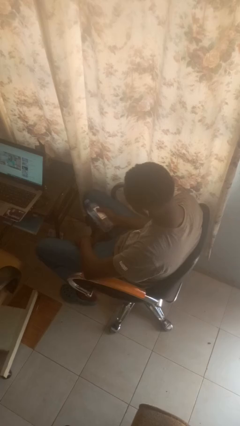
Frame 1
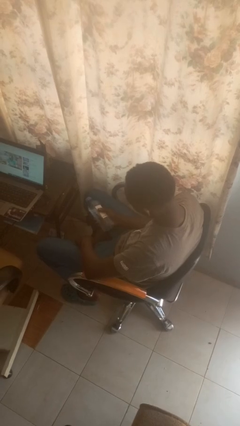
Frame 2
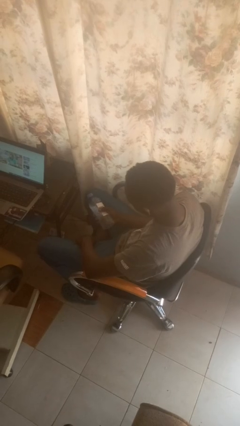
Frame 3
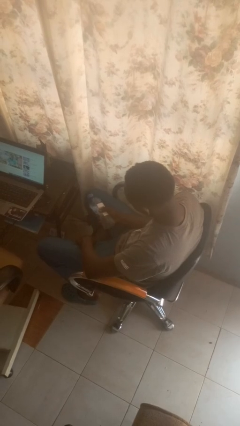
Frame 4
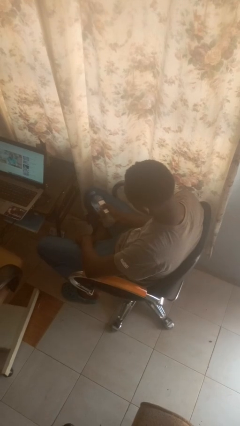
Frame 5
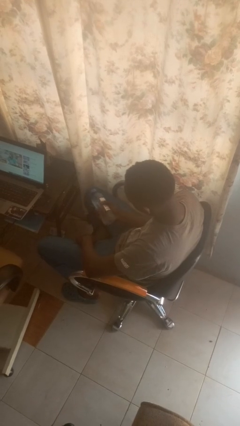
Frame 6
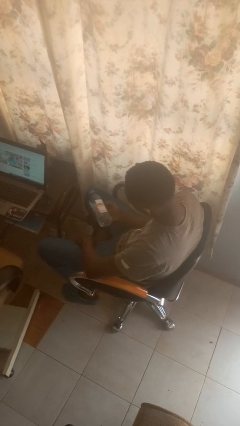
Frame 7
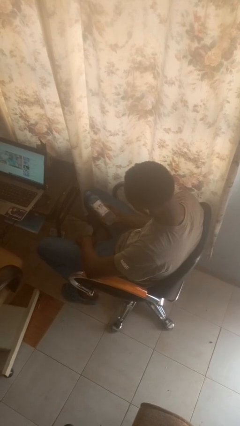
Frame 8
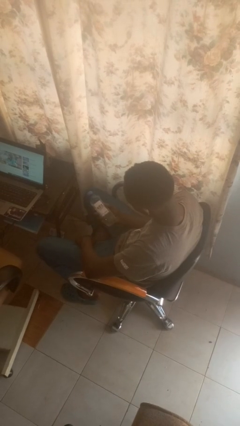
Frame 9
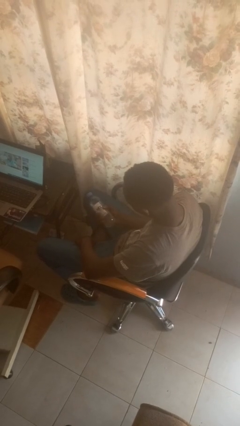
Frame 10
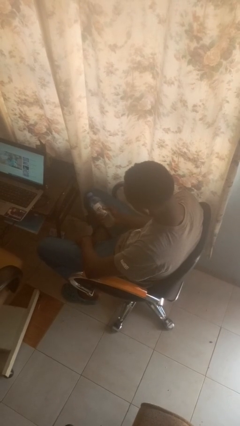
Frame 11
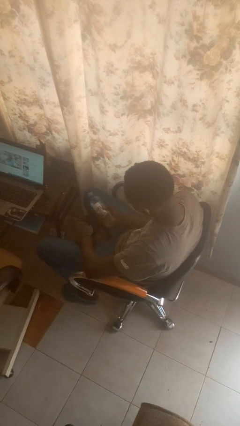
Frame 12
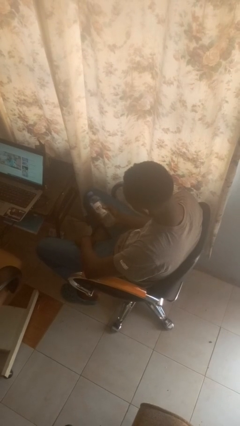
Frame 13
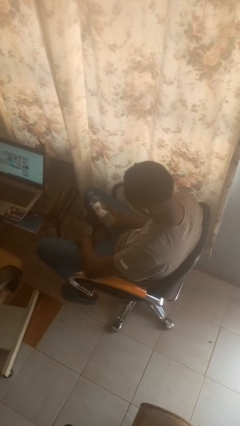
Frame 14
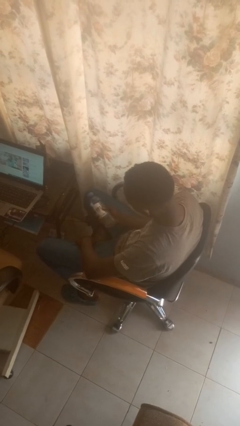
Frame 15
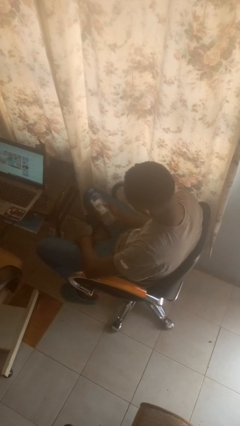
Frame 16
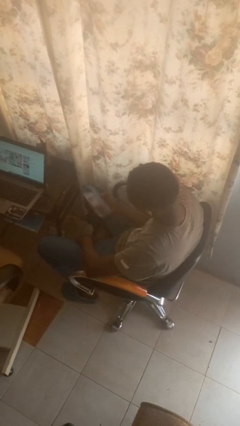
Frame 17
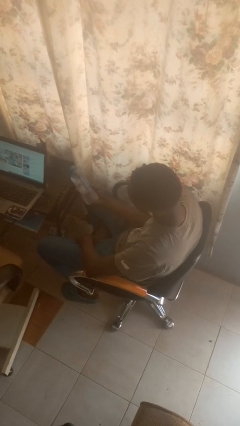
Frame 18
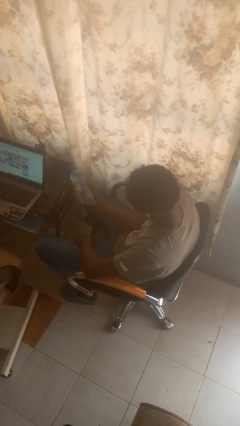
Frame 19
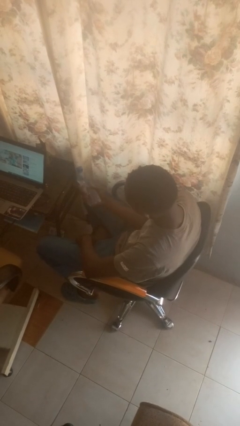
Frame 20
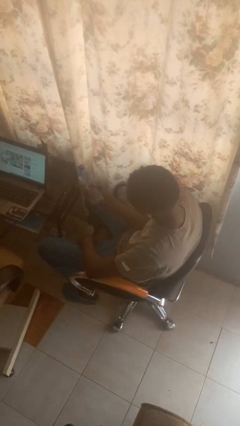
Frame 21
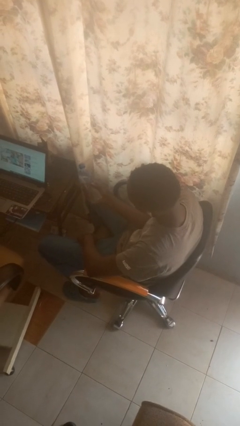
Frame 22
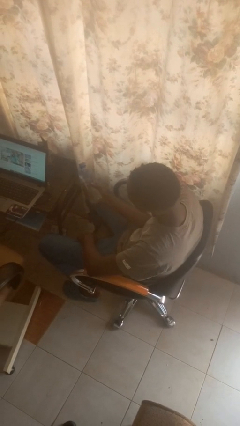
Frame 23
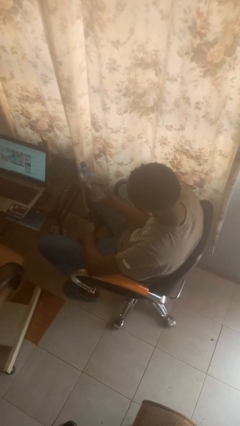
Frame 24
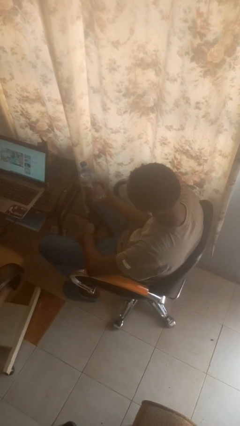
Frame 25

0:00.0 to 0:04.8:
person squeezes object

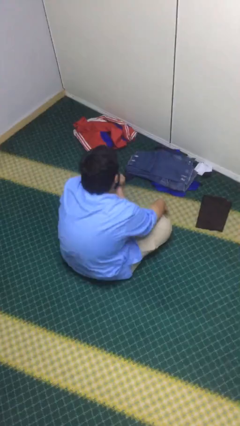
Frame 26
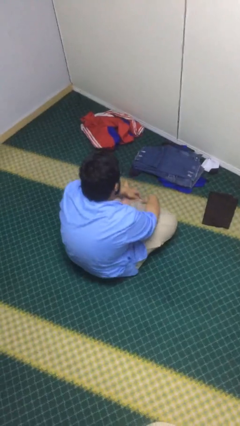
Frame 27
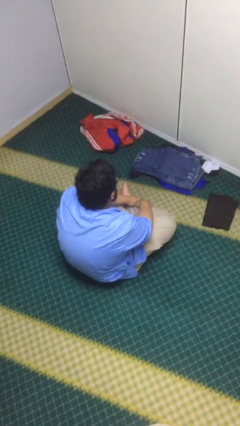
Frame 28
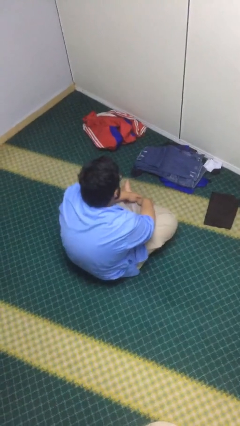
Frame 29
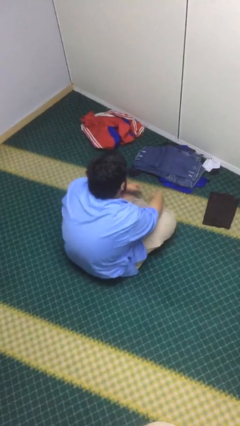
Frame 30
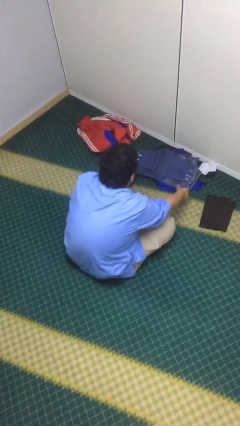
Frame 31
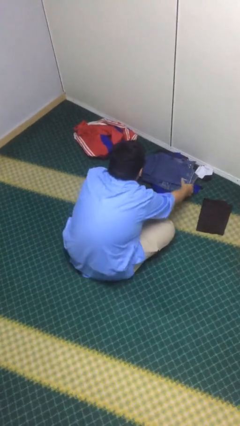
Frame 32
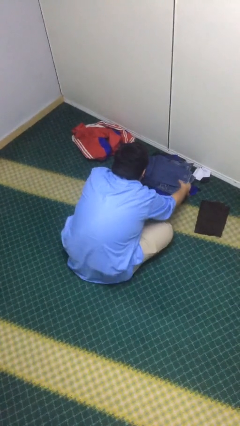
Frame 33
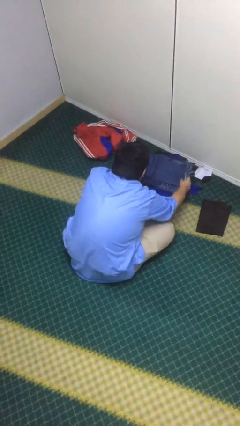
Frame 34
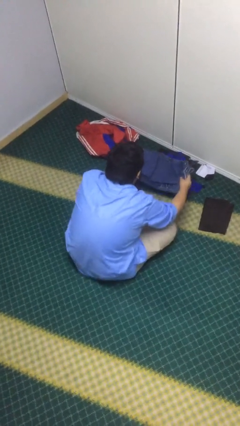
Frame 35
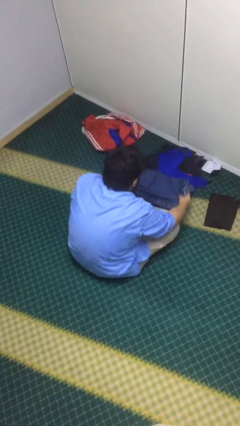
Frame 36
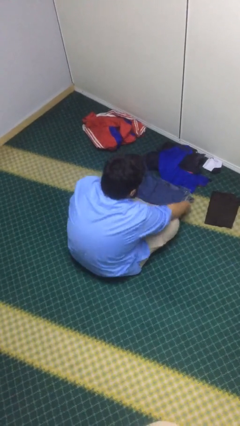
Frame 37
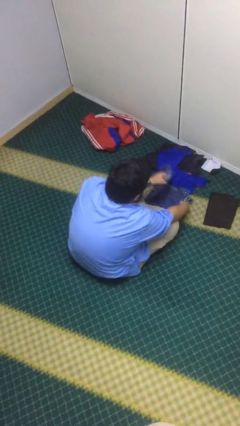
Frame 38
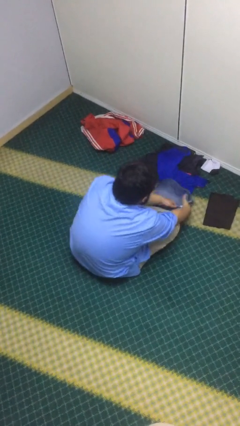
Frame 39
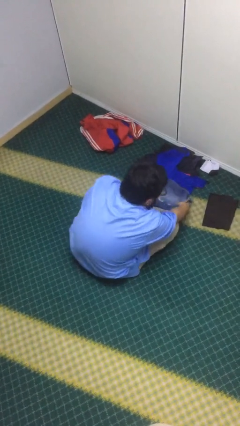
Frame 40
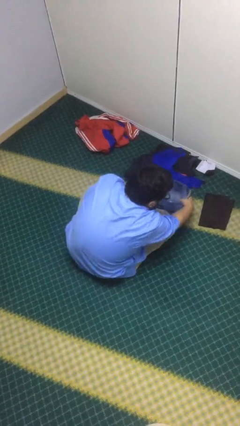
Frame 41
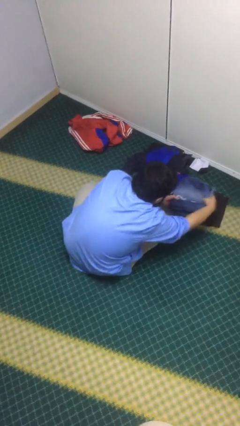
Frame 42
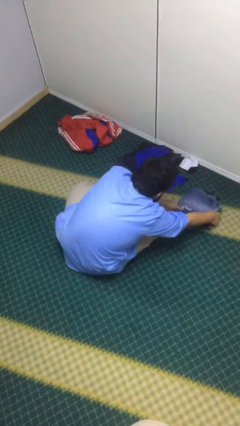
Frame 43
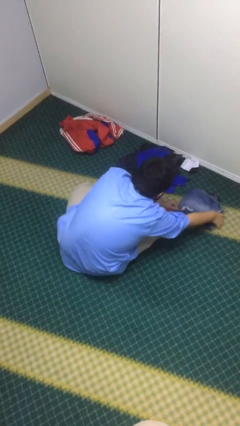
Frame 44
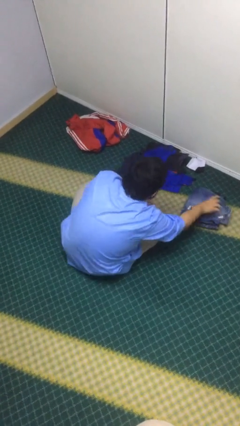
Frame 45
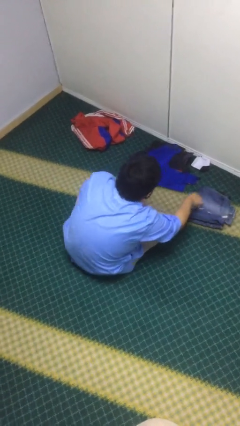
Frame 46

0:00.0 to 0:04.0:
person folds pants

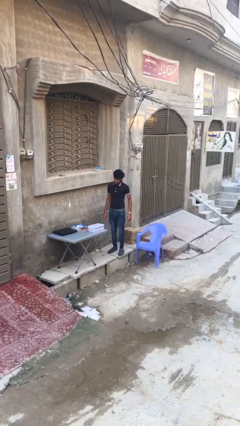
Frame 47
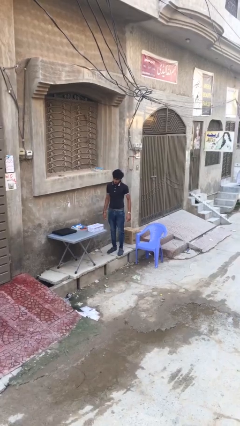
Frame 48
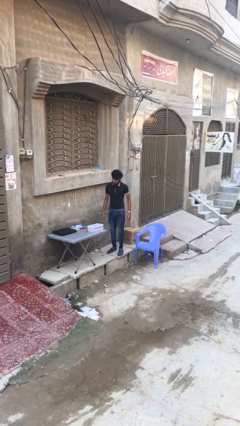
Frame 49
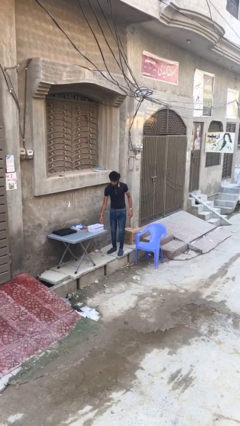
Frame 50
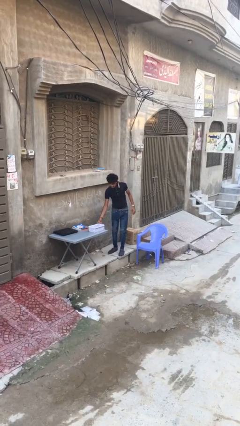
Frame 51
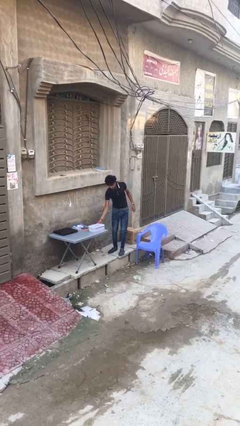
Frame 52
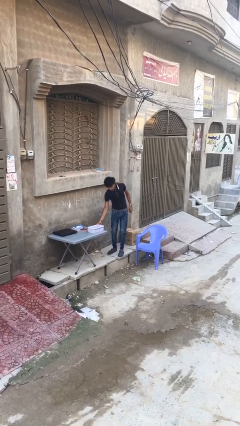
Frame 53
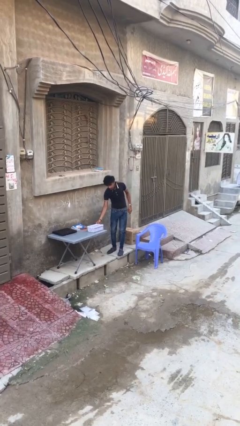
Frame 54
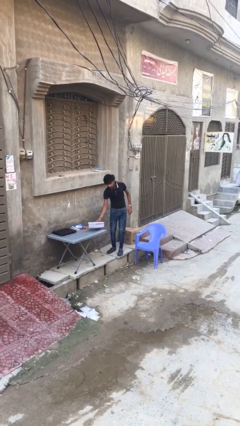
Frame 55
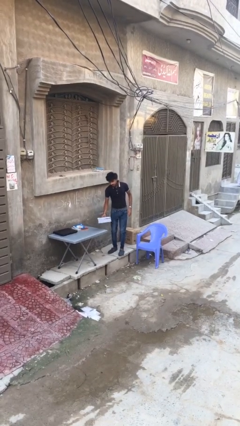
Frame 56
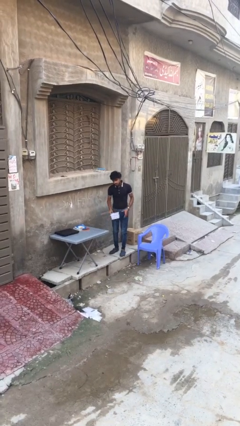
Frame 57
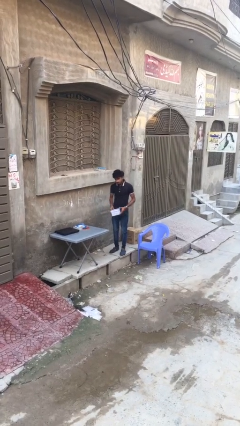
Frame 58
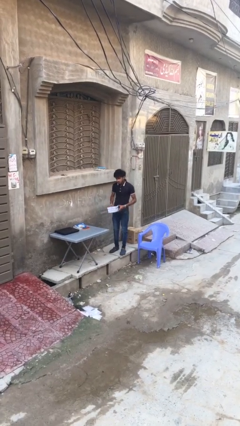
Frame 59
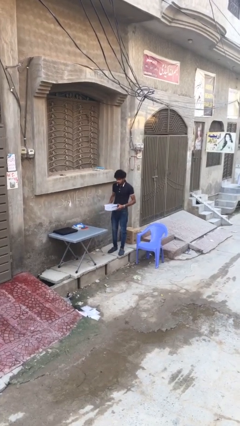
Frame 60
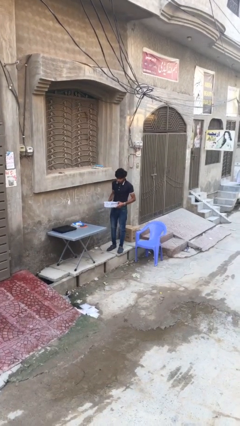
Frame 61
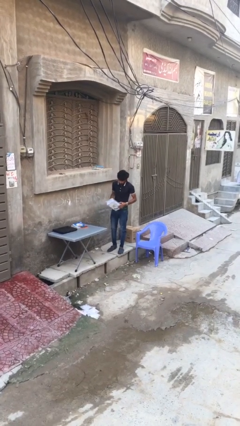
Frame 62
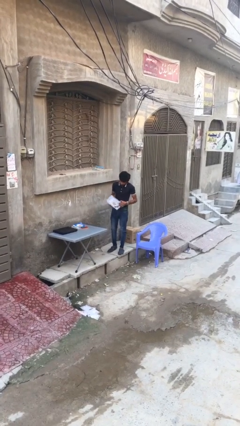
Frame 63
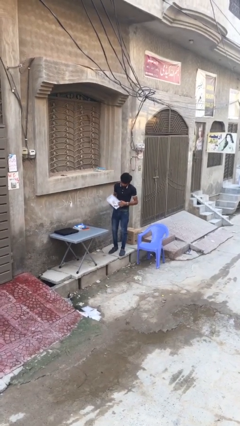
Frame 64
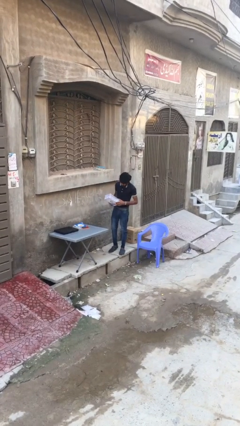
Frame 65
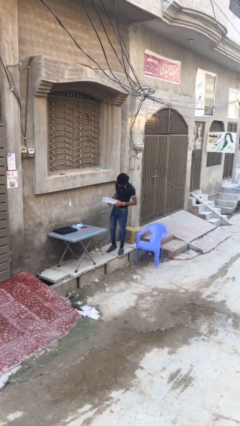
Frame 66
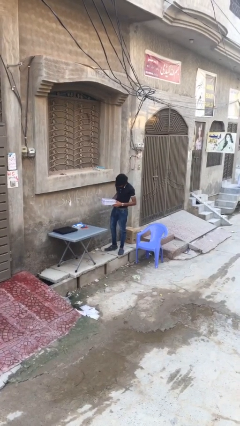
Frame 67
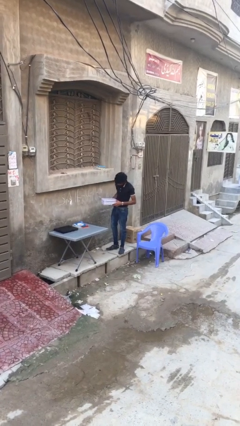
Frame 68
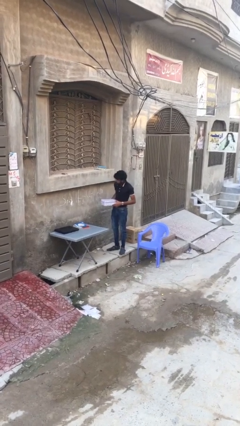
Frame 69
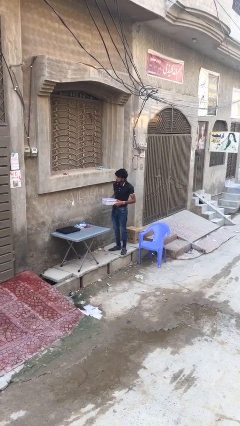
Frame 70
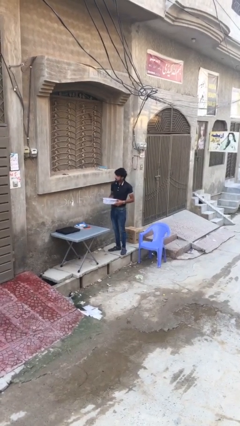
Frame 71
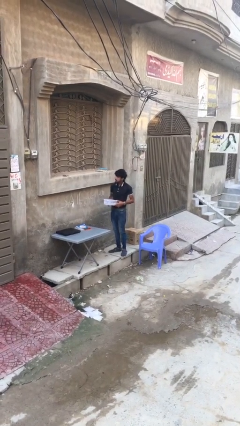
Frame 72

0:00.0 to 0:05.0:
person picks up object from table

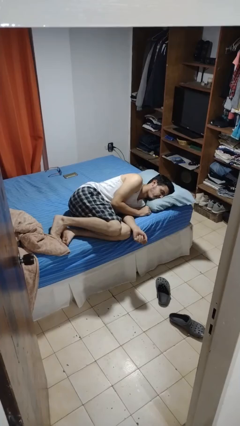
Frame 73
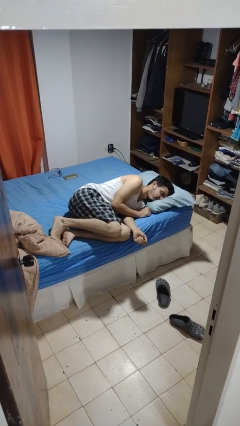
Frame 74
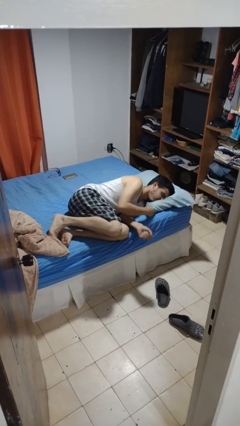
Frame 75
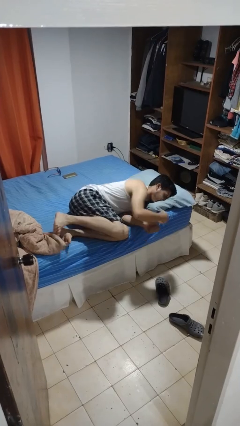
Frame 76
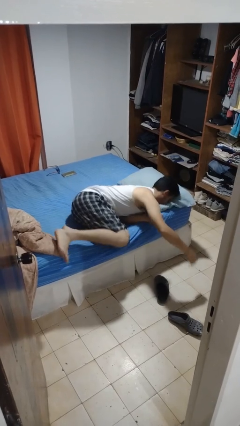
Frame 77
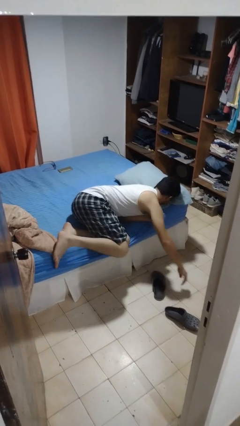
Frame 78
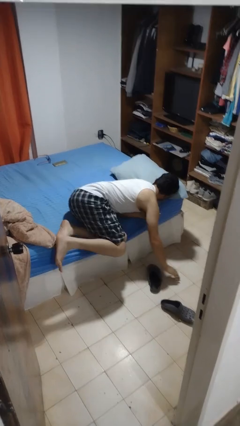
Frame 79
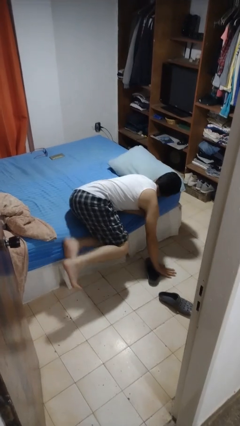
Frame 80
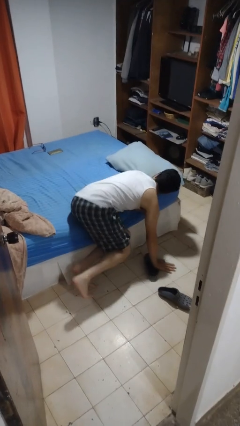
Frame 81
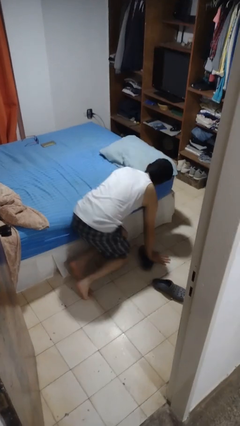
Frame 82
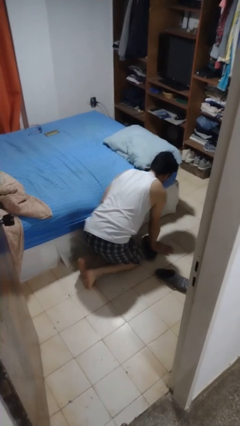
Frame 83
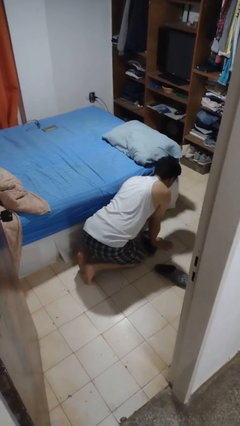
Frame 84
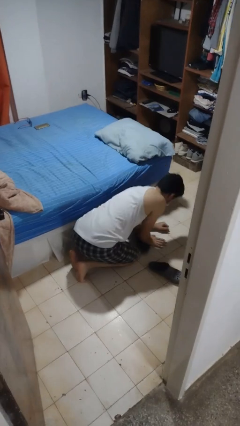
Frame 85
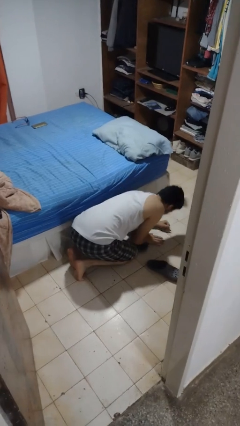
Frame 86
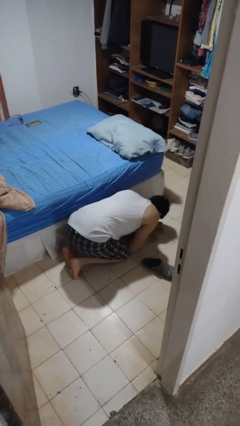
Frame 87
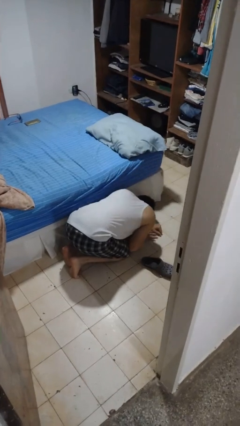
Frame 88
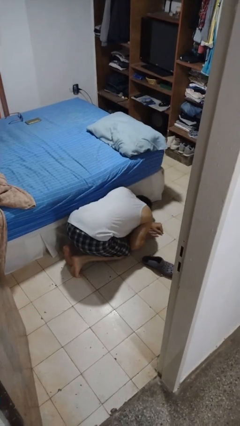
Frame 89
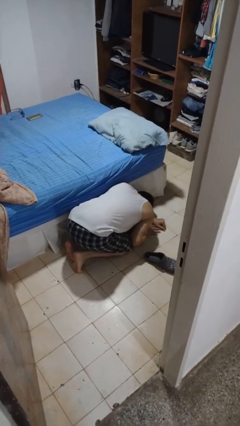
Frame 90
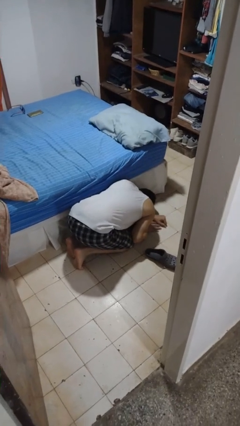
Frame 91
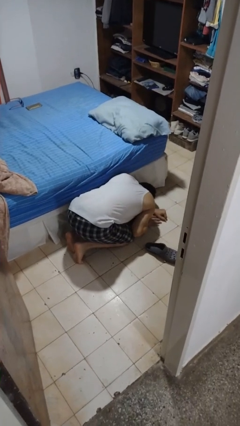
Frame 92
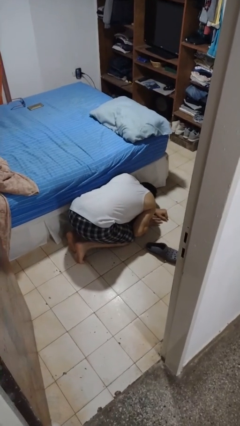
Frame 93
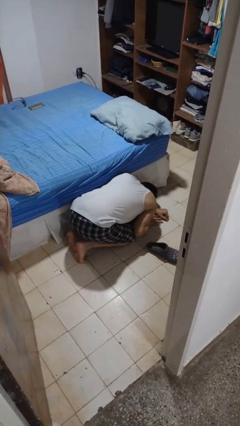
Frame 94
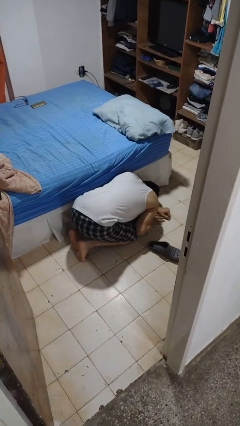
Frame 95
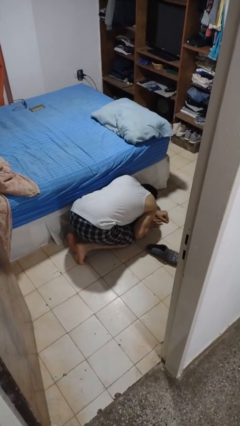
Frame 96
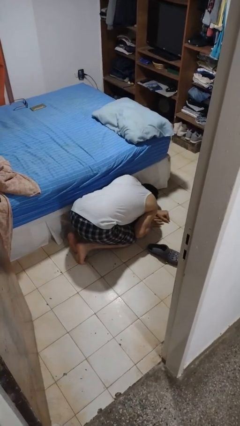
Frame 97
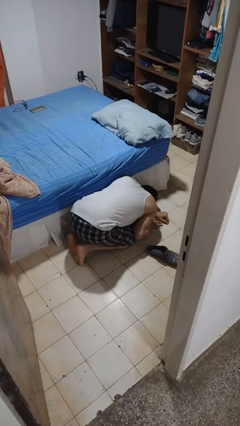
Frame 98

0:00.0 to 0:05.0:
person falls from bed
